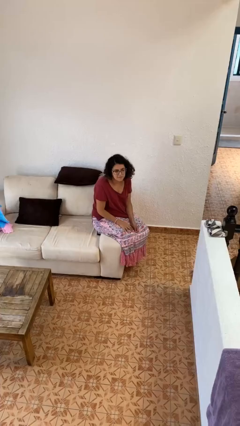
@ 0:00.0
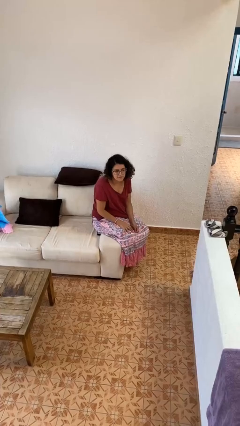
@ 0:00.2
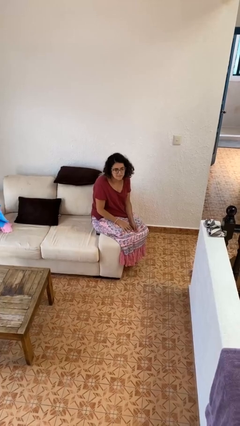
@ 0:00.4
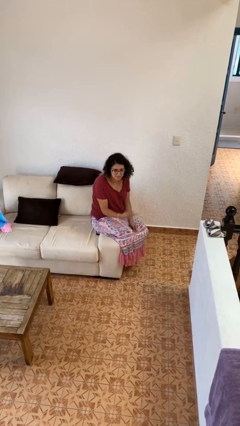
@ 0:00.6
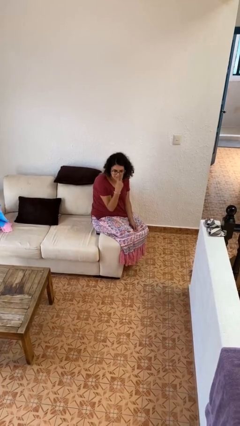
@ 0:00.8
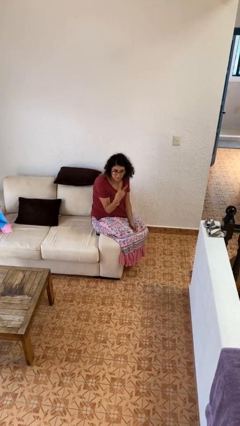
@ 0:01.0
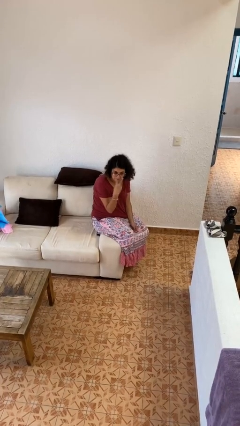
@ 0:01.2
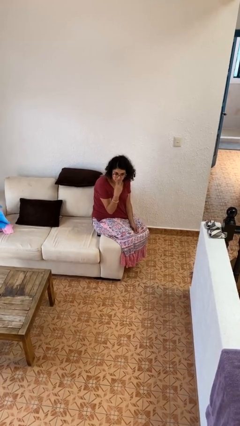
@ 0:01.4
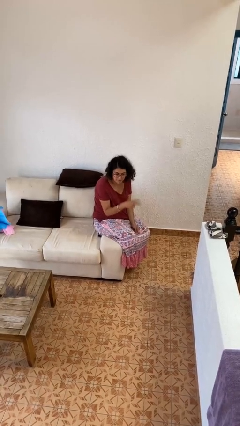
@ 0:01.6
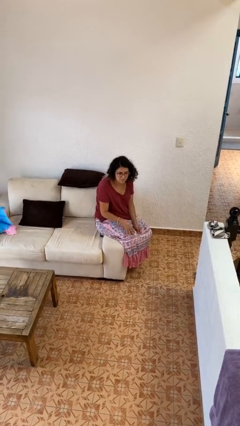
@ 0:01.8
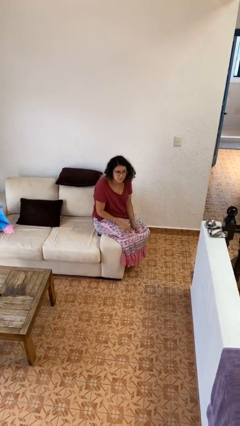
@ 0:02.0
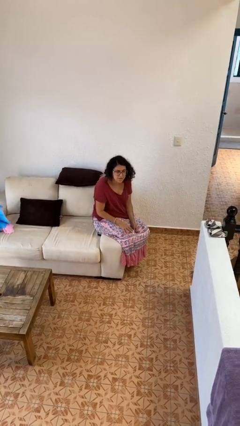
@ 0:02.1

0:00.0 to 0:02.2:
person gestures watch closely

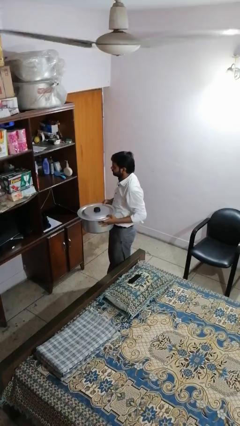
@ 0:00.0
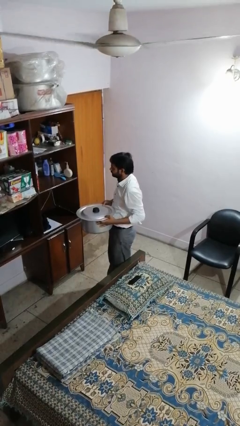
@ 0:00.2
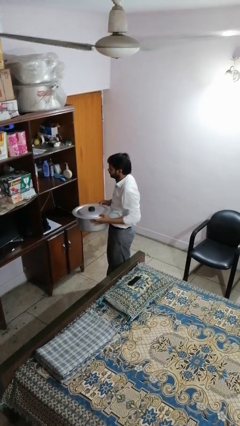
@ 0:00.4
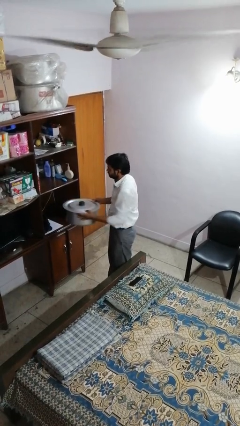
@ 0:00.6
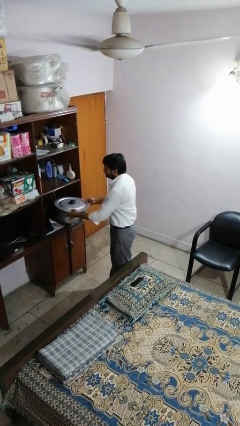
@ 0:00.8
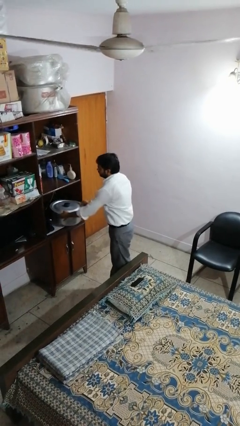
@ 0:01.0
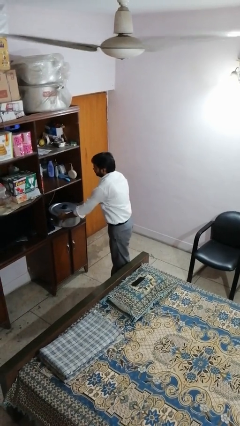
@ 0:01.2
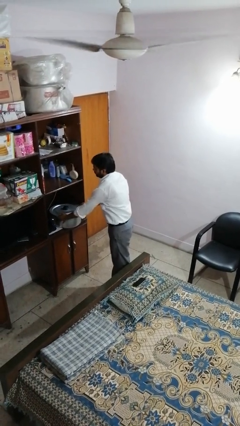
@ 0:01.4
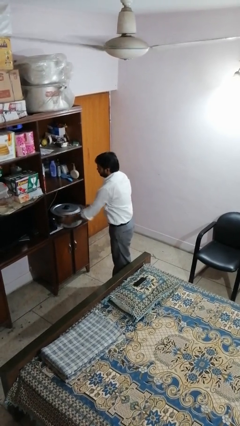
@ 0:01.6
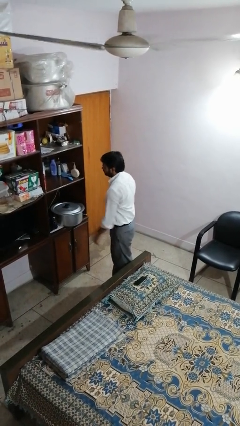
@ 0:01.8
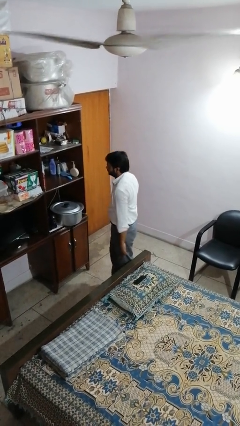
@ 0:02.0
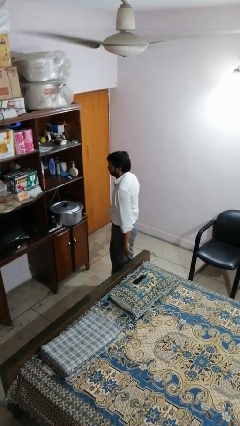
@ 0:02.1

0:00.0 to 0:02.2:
person puts down object on shelf

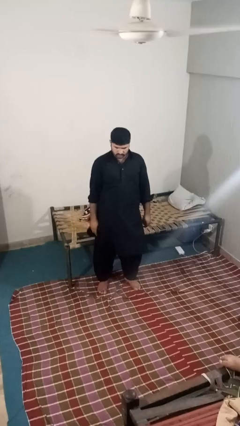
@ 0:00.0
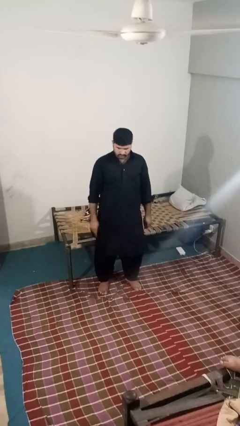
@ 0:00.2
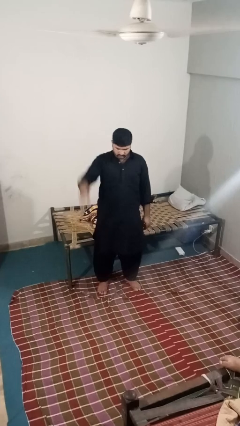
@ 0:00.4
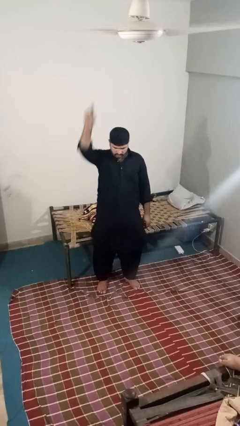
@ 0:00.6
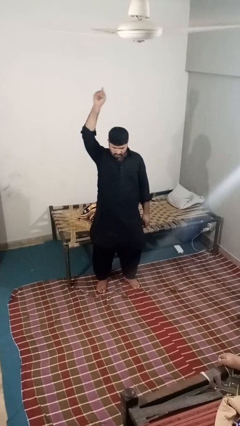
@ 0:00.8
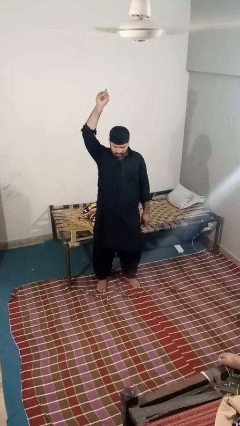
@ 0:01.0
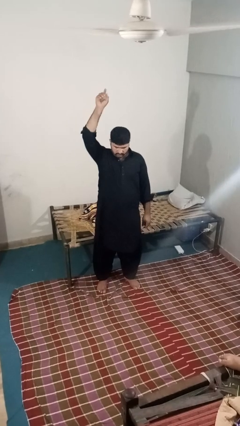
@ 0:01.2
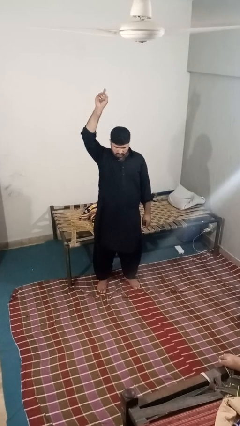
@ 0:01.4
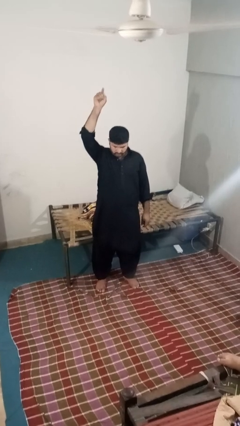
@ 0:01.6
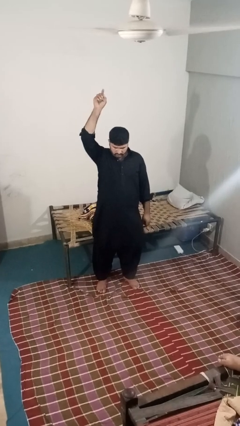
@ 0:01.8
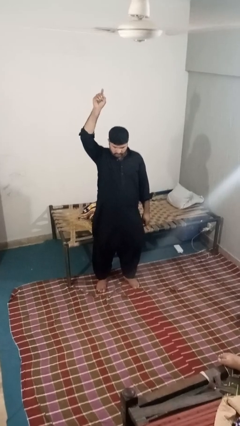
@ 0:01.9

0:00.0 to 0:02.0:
person gestures swipe up

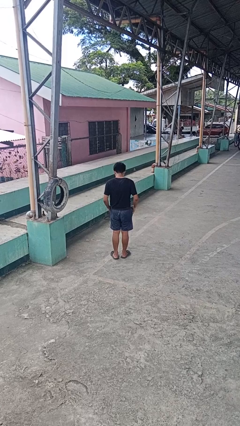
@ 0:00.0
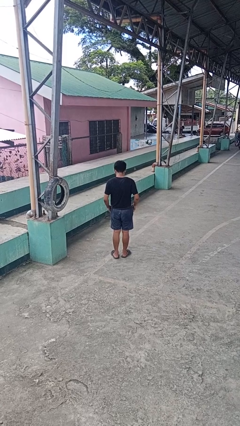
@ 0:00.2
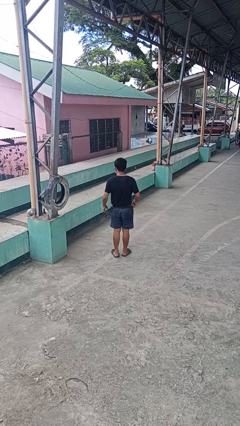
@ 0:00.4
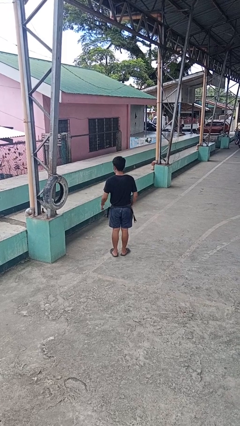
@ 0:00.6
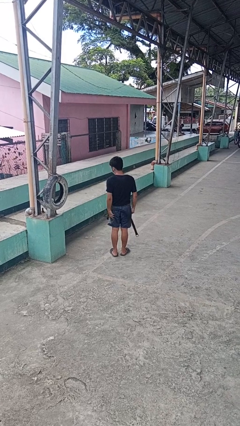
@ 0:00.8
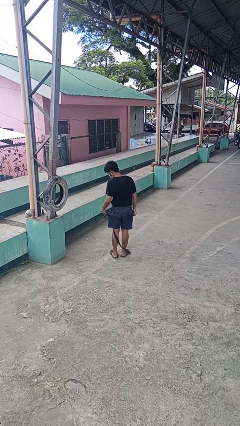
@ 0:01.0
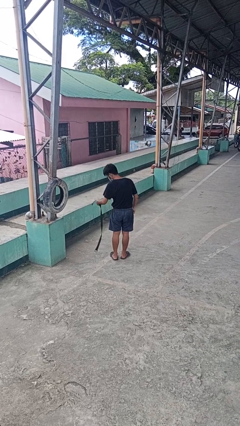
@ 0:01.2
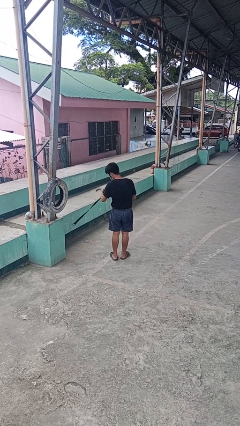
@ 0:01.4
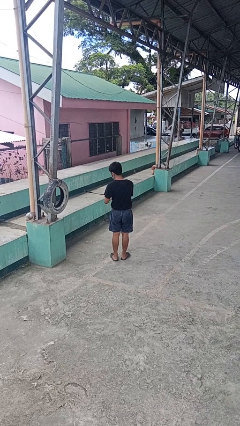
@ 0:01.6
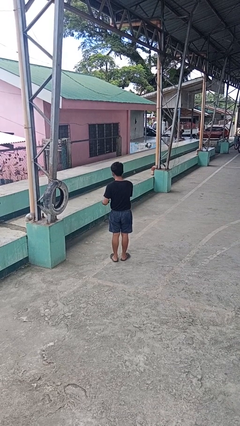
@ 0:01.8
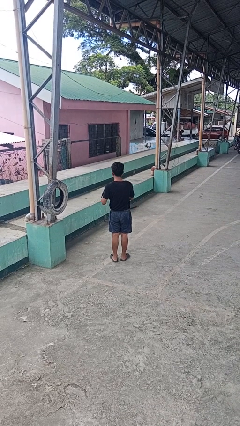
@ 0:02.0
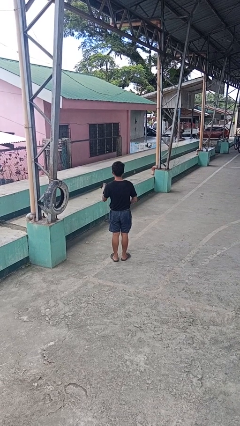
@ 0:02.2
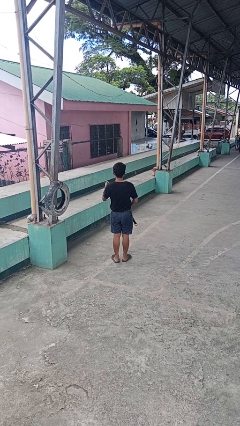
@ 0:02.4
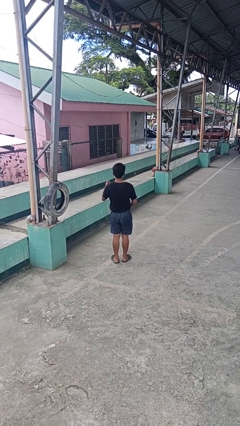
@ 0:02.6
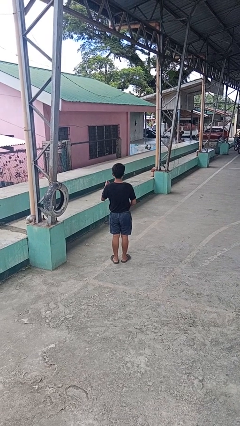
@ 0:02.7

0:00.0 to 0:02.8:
person takes off belt

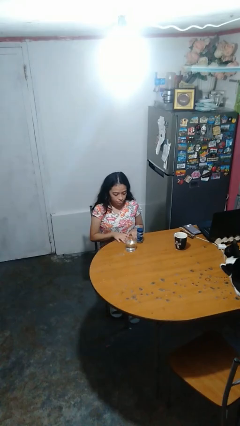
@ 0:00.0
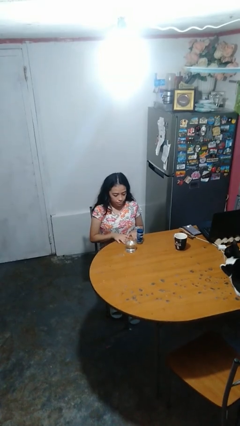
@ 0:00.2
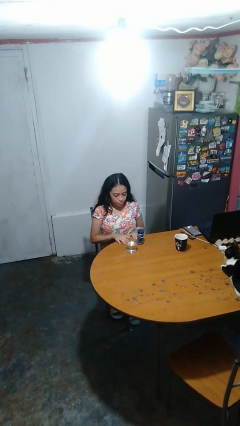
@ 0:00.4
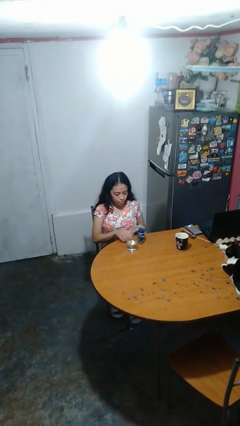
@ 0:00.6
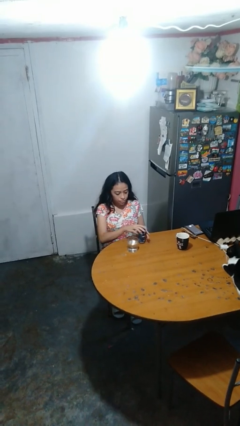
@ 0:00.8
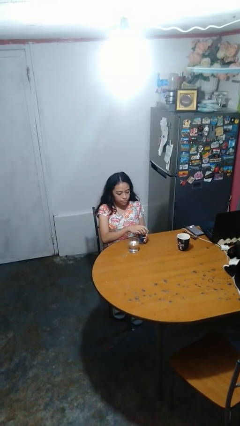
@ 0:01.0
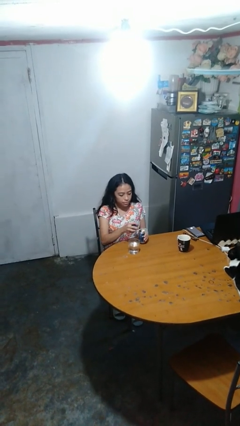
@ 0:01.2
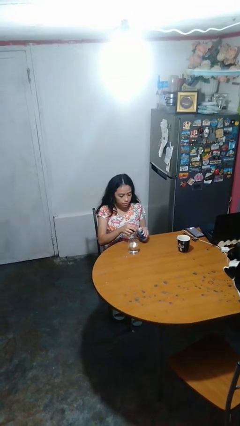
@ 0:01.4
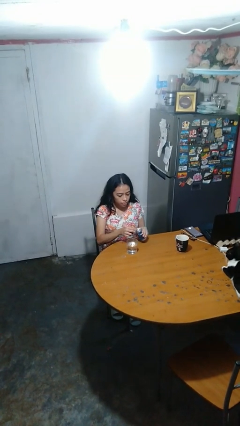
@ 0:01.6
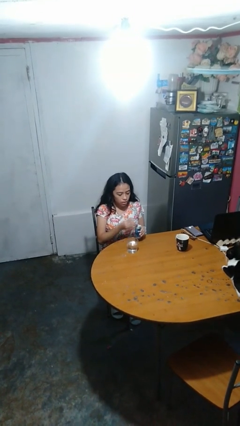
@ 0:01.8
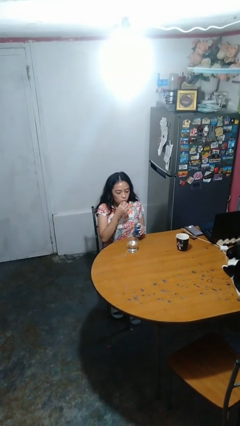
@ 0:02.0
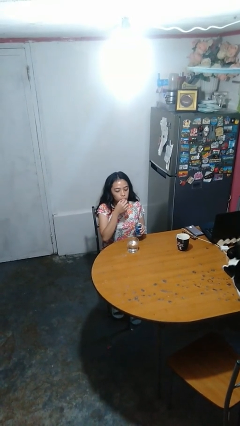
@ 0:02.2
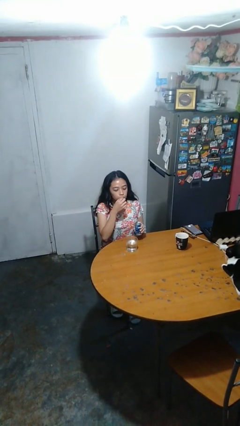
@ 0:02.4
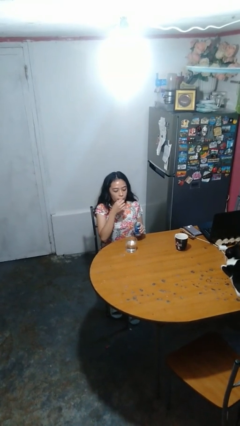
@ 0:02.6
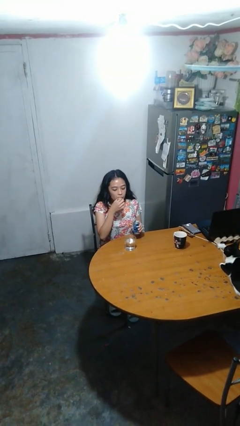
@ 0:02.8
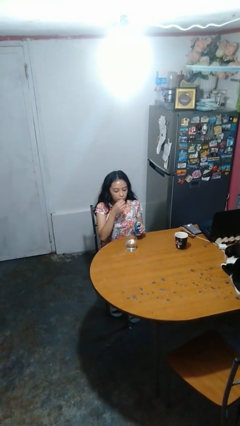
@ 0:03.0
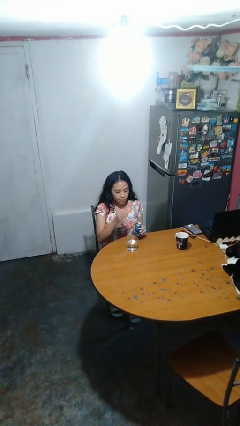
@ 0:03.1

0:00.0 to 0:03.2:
person takes medicine pills

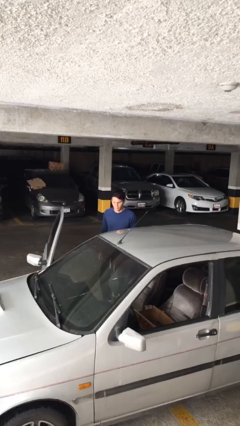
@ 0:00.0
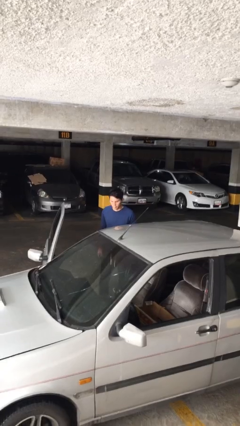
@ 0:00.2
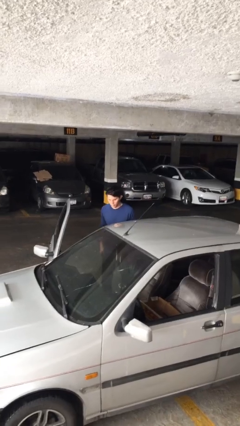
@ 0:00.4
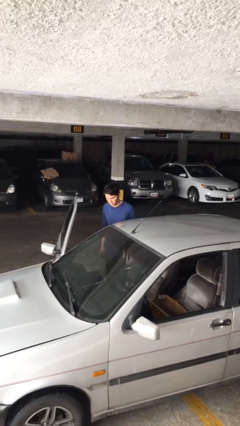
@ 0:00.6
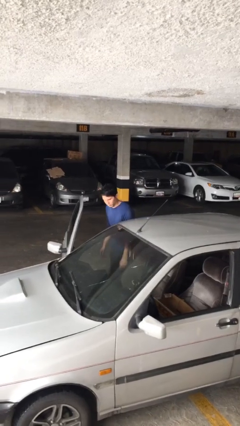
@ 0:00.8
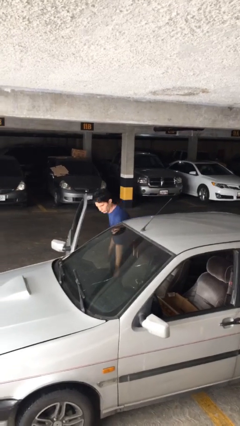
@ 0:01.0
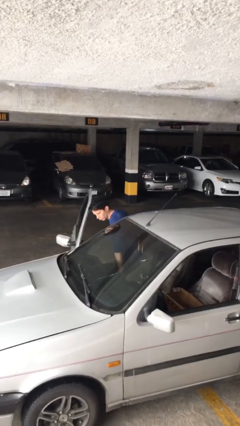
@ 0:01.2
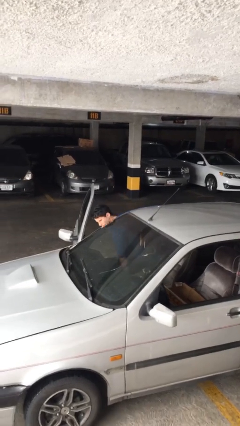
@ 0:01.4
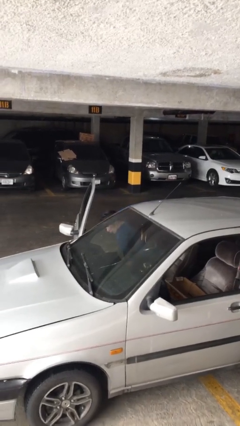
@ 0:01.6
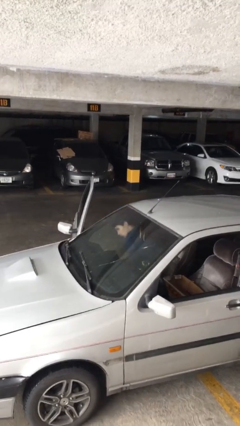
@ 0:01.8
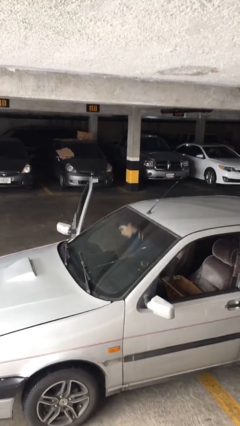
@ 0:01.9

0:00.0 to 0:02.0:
person enters car

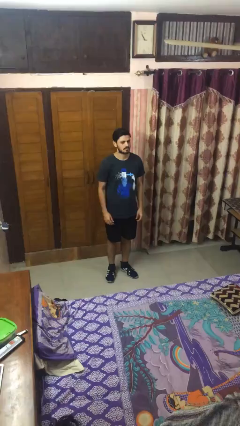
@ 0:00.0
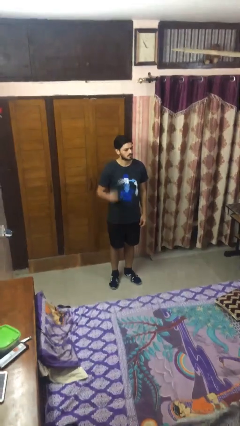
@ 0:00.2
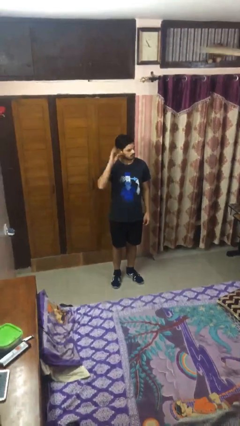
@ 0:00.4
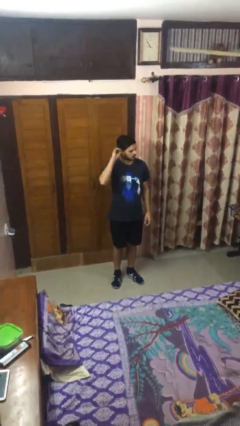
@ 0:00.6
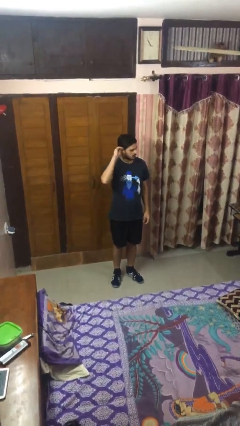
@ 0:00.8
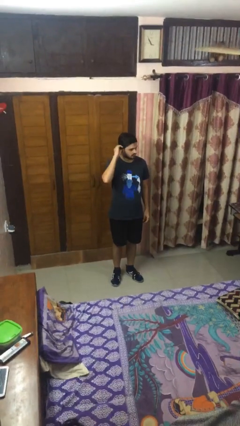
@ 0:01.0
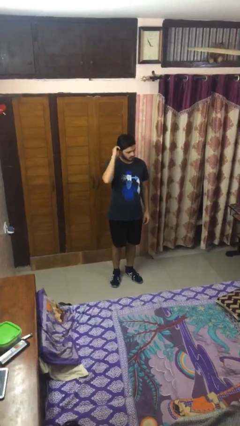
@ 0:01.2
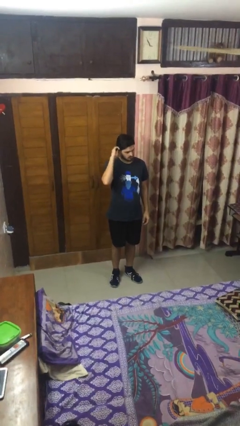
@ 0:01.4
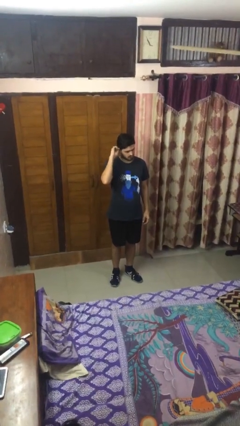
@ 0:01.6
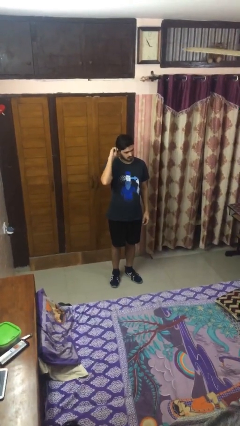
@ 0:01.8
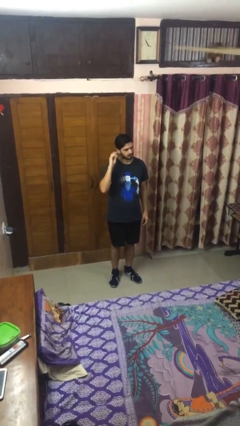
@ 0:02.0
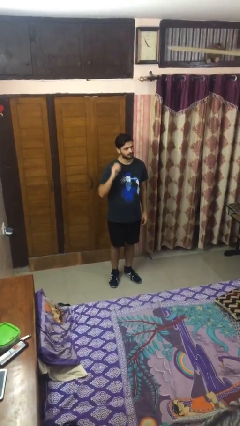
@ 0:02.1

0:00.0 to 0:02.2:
person touches earlobe

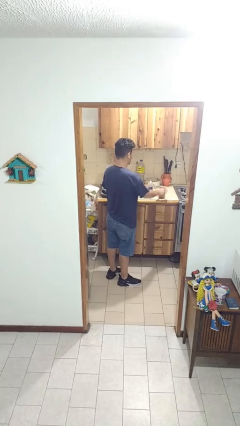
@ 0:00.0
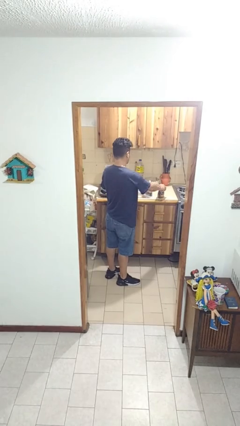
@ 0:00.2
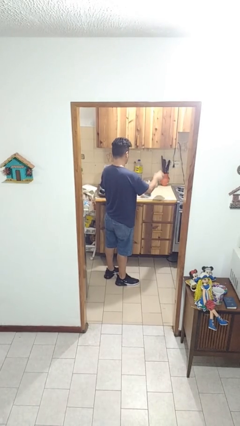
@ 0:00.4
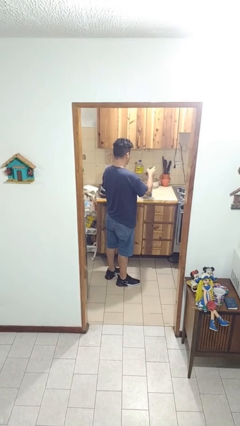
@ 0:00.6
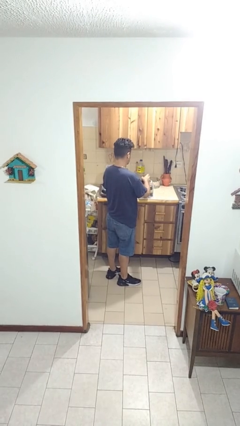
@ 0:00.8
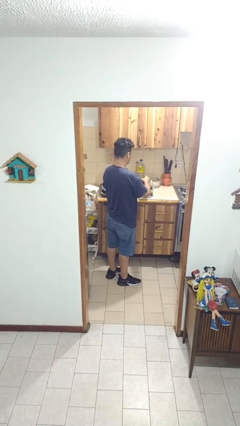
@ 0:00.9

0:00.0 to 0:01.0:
person puts object into bag
